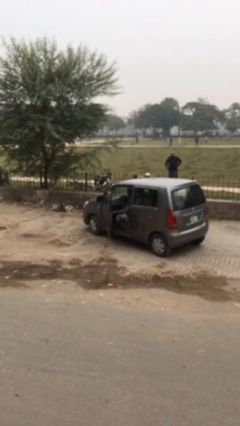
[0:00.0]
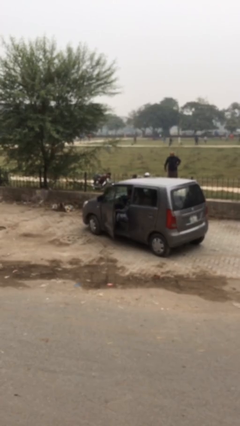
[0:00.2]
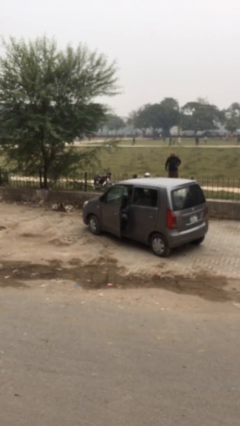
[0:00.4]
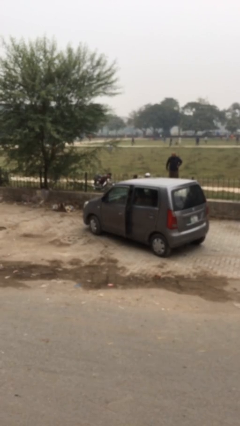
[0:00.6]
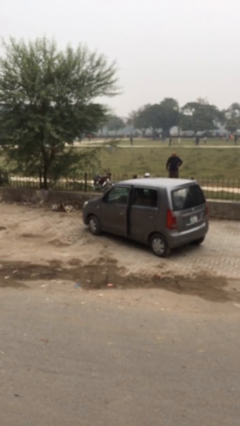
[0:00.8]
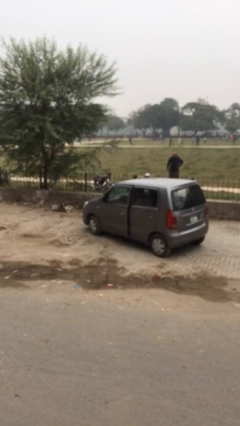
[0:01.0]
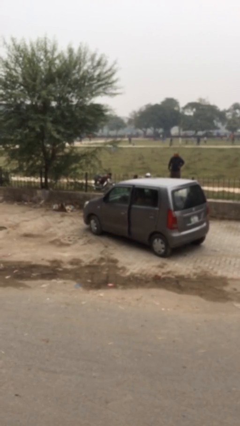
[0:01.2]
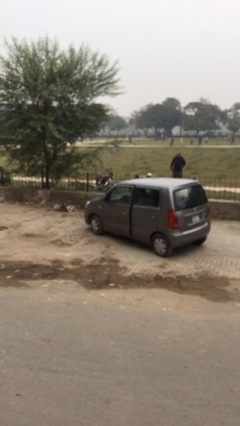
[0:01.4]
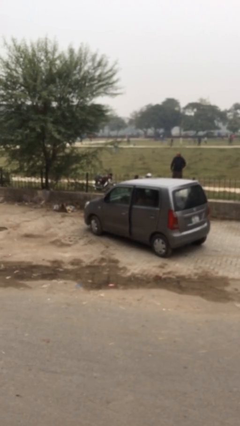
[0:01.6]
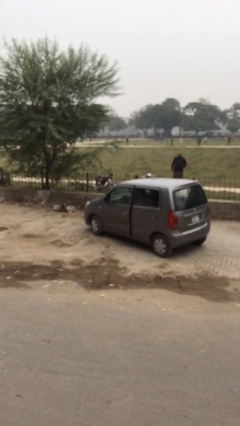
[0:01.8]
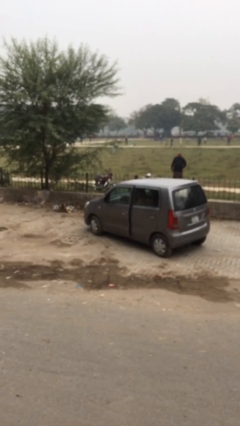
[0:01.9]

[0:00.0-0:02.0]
person closes car door

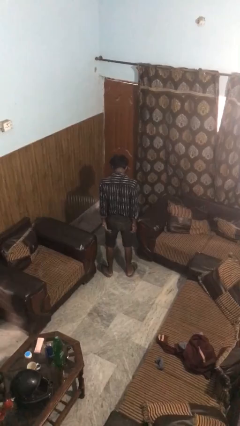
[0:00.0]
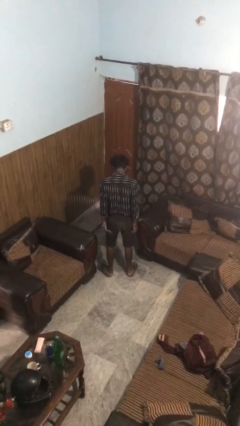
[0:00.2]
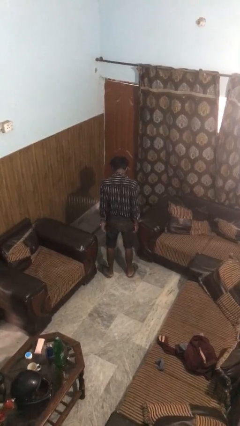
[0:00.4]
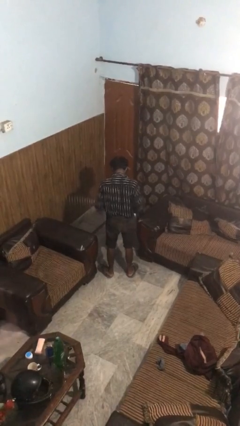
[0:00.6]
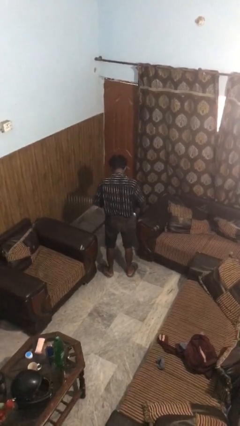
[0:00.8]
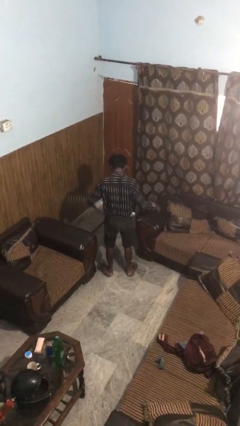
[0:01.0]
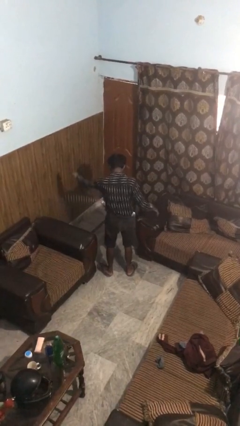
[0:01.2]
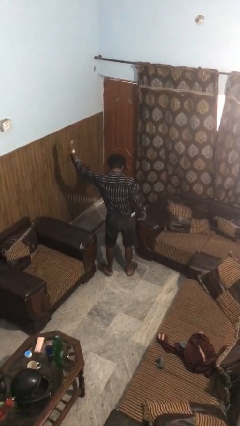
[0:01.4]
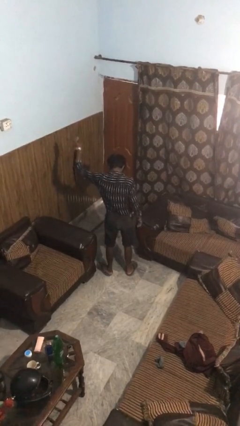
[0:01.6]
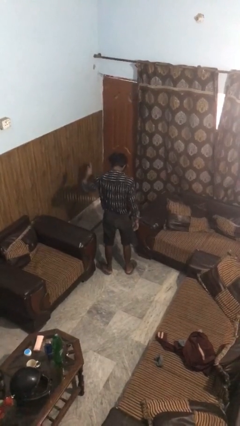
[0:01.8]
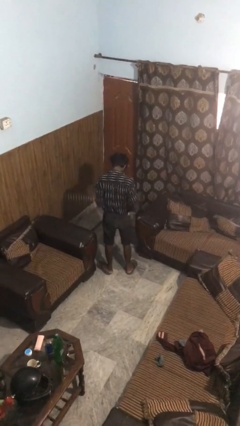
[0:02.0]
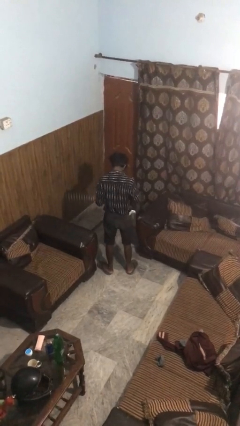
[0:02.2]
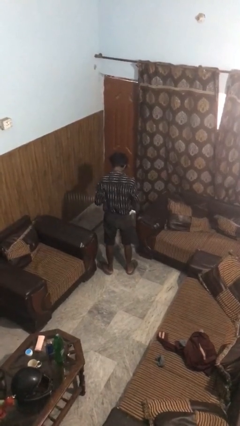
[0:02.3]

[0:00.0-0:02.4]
person takes off belt

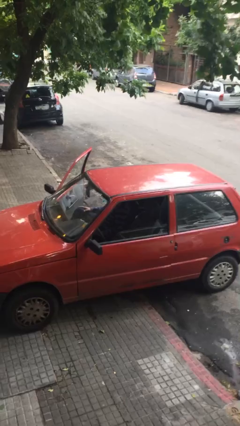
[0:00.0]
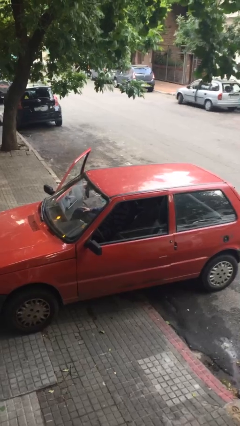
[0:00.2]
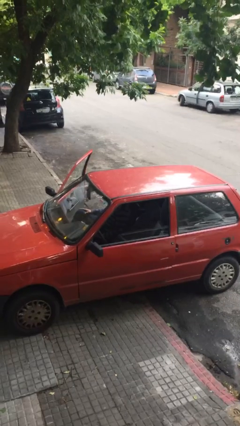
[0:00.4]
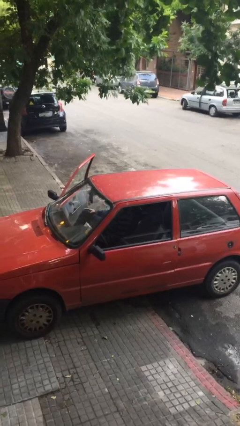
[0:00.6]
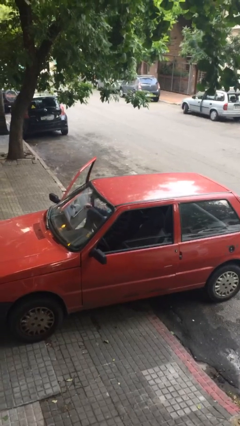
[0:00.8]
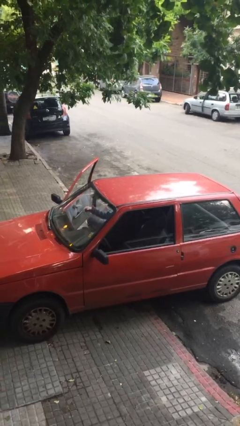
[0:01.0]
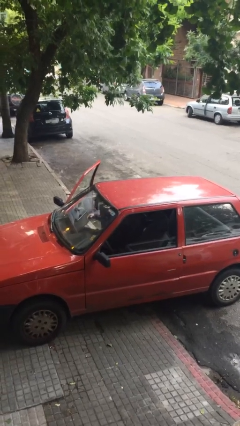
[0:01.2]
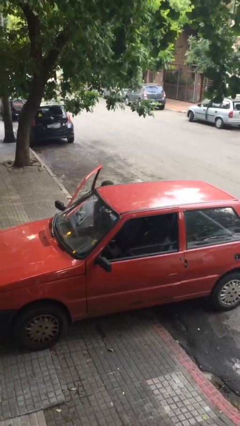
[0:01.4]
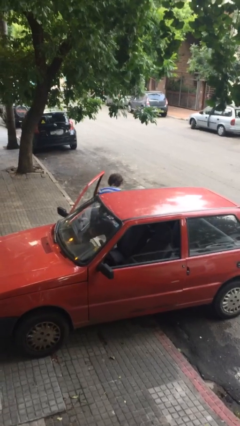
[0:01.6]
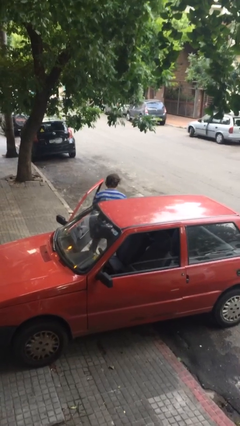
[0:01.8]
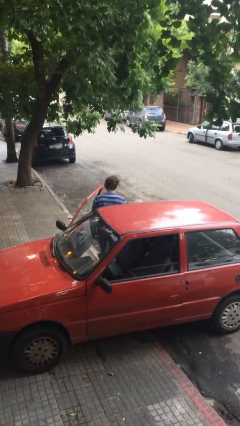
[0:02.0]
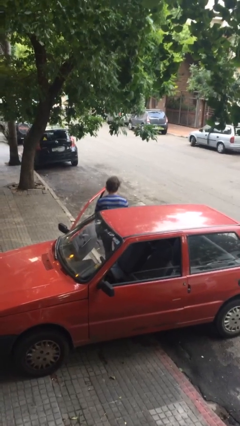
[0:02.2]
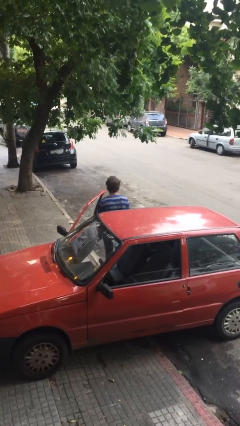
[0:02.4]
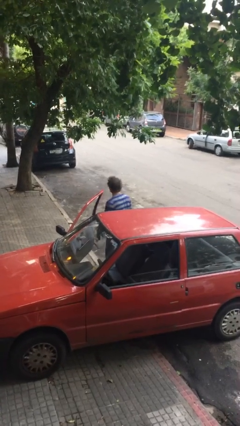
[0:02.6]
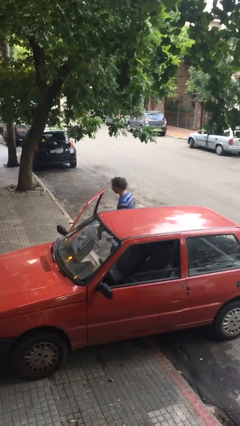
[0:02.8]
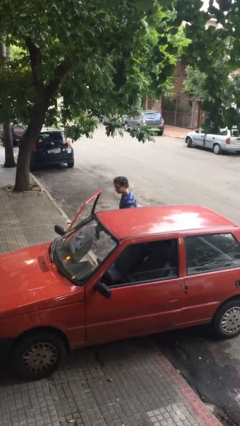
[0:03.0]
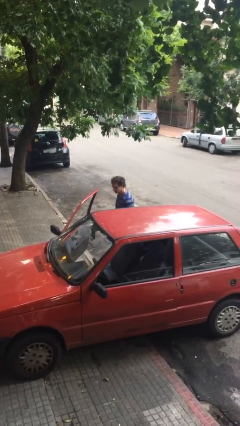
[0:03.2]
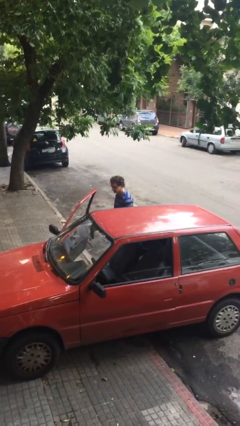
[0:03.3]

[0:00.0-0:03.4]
person exits car

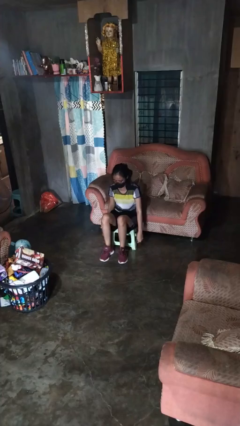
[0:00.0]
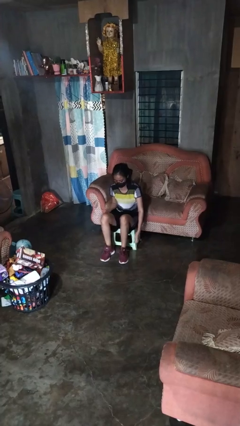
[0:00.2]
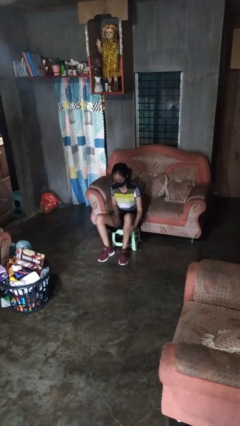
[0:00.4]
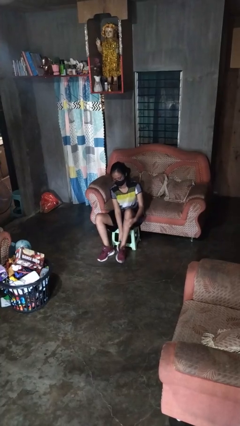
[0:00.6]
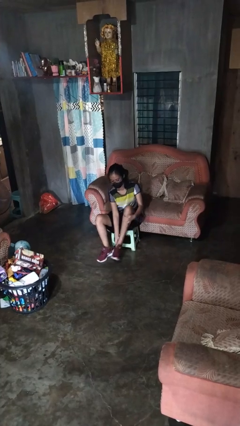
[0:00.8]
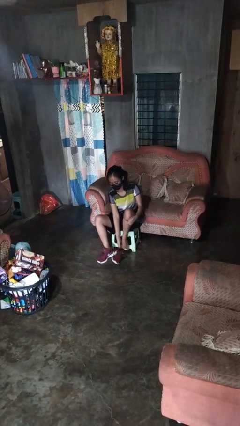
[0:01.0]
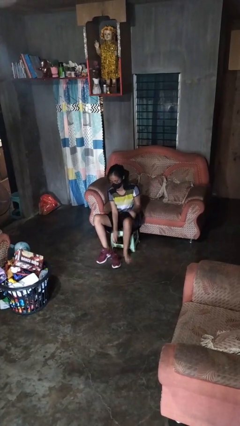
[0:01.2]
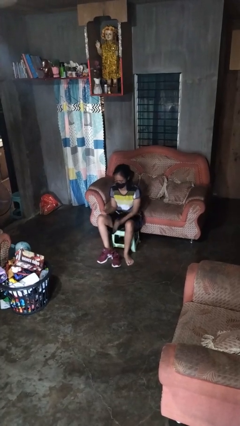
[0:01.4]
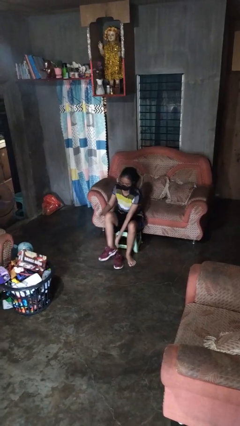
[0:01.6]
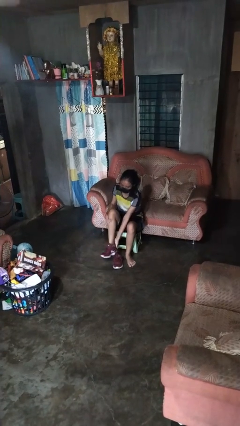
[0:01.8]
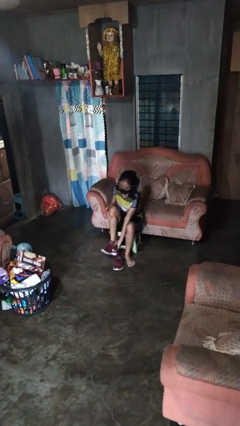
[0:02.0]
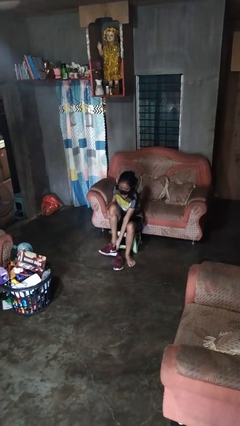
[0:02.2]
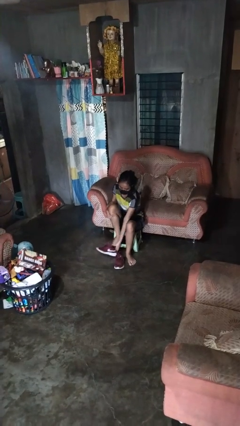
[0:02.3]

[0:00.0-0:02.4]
person takes off shoes

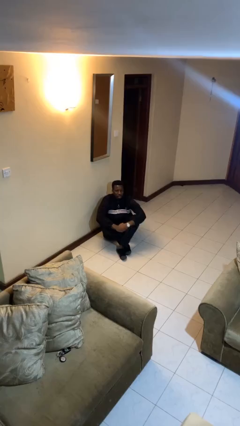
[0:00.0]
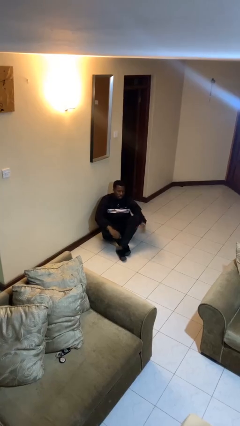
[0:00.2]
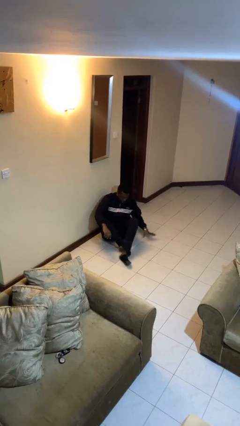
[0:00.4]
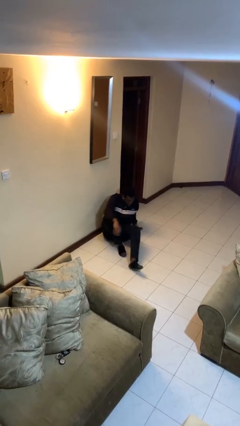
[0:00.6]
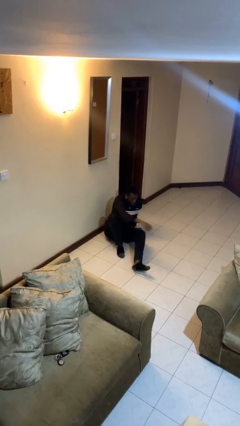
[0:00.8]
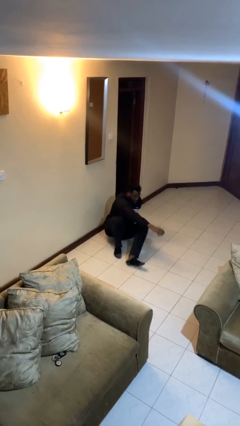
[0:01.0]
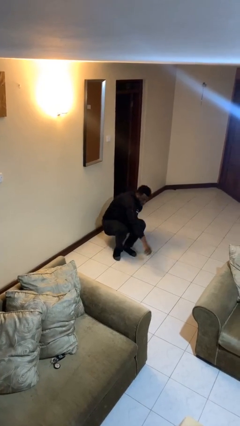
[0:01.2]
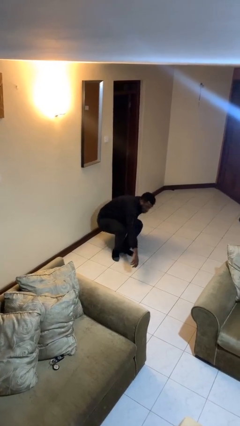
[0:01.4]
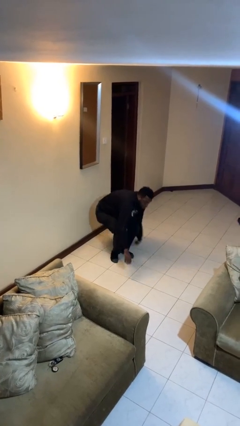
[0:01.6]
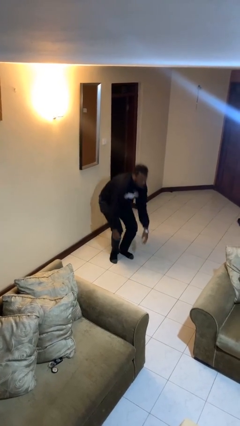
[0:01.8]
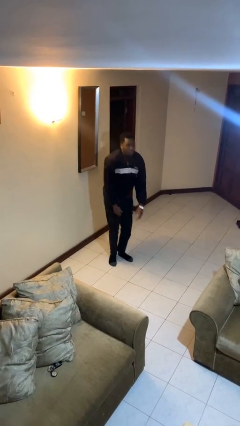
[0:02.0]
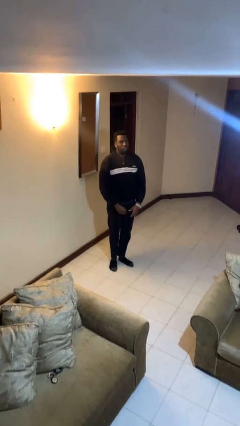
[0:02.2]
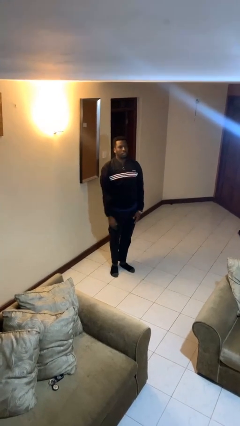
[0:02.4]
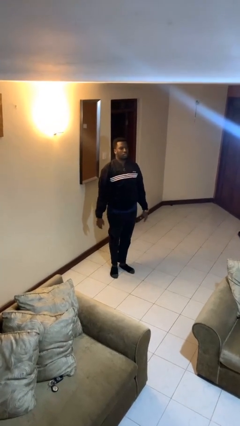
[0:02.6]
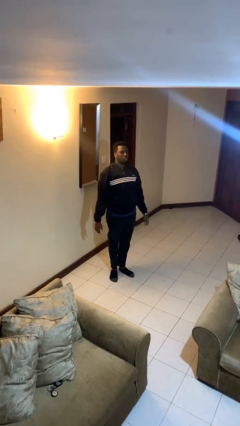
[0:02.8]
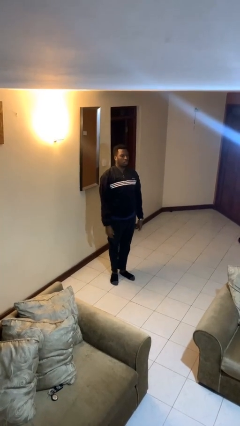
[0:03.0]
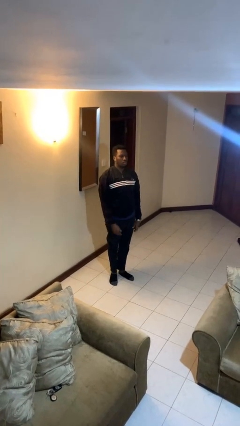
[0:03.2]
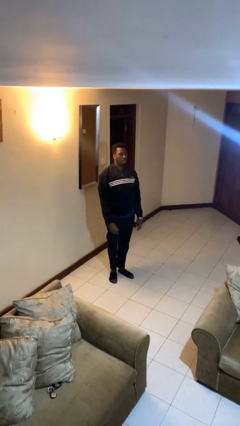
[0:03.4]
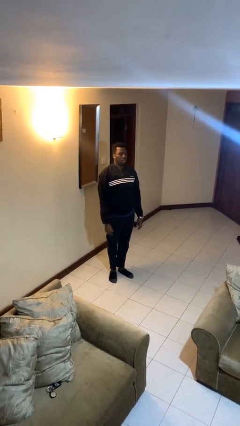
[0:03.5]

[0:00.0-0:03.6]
person stands up from floor

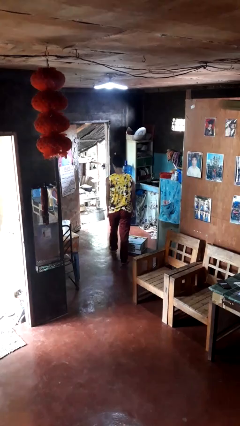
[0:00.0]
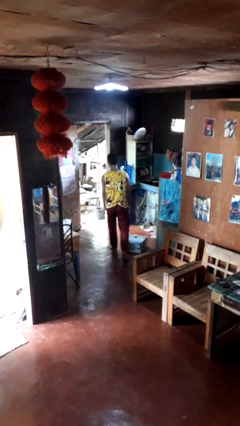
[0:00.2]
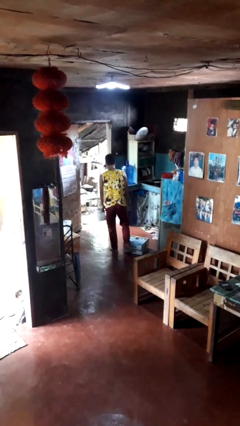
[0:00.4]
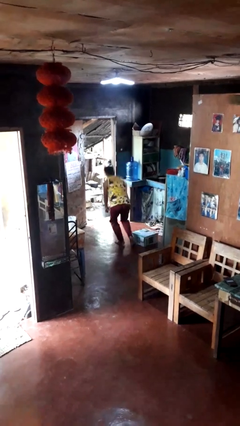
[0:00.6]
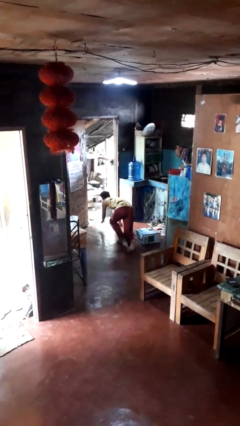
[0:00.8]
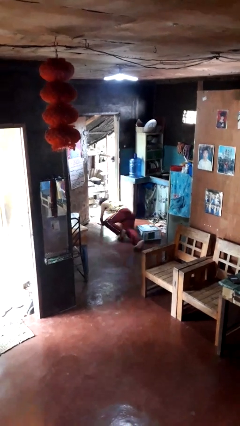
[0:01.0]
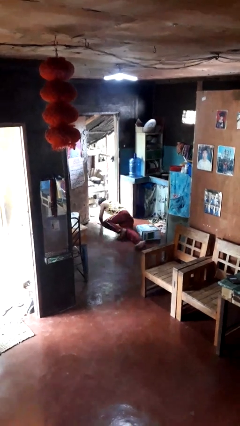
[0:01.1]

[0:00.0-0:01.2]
person trips on object on floor

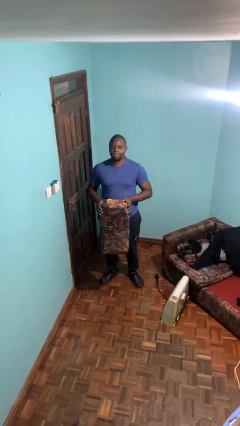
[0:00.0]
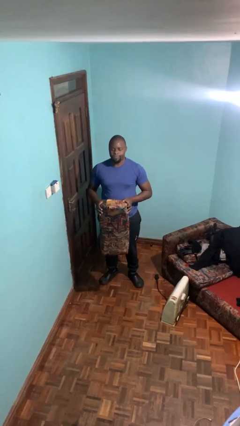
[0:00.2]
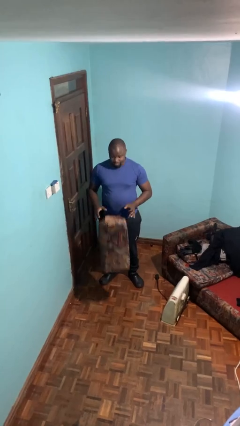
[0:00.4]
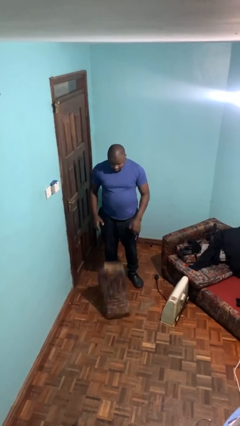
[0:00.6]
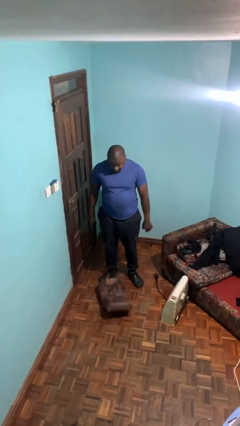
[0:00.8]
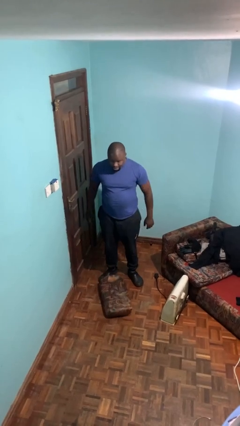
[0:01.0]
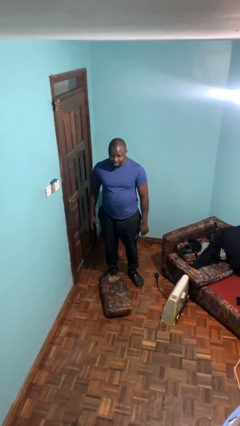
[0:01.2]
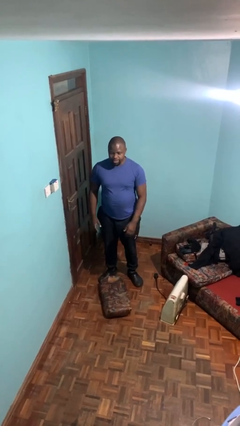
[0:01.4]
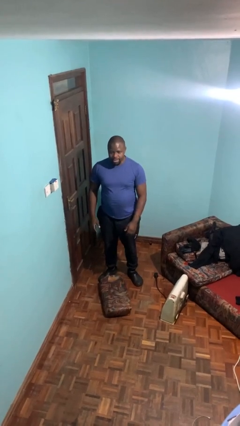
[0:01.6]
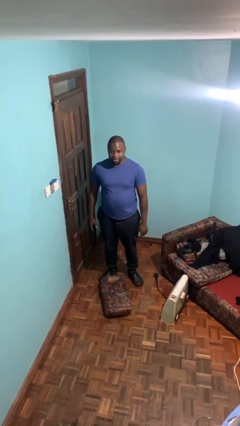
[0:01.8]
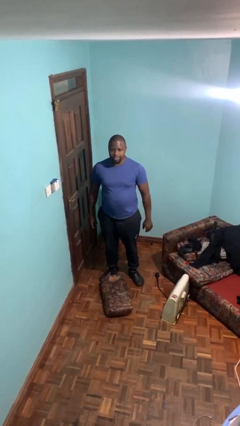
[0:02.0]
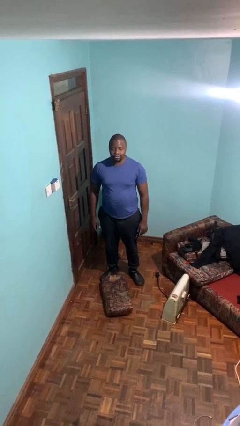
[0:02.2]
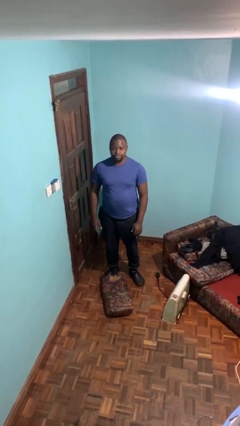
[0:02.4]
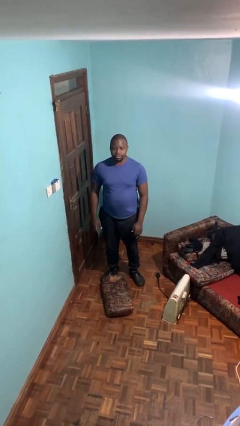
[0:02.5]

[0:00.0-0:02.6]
person drops object
